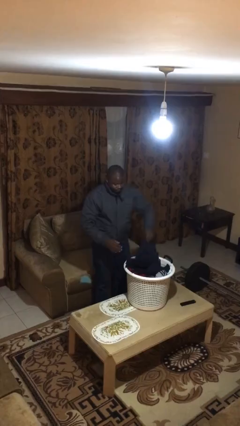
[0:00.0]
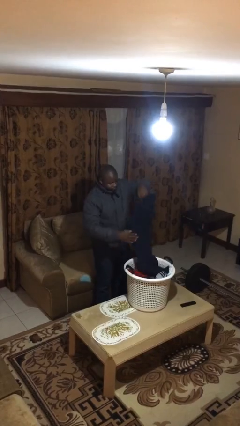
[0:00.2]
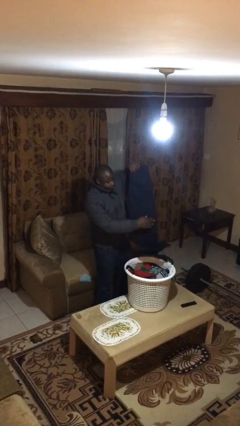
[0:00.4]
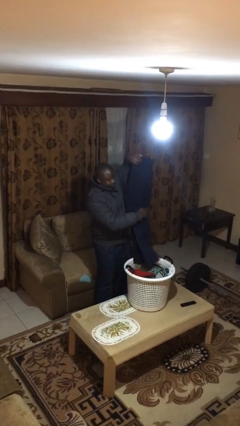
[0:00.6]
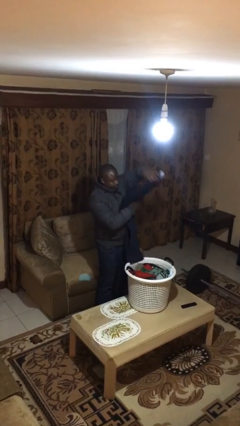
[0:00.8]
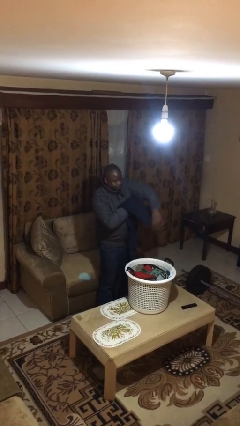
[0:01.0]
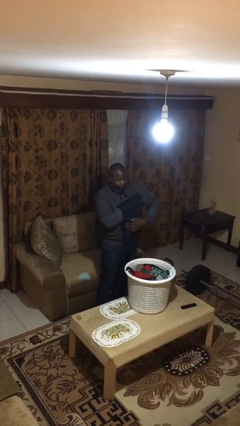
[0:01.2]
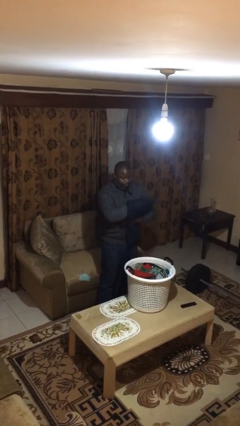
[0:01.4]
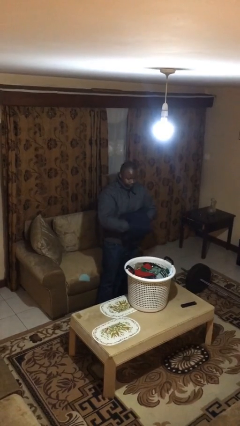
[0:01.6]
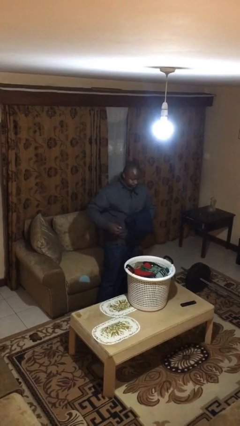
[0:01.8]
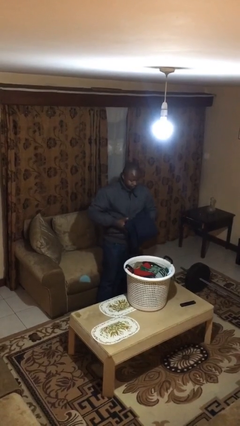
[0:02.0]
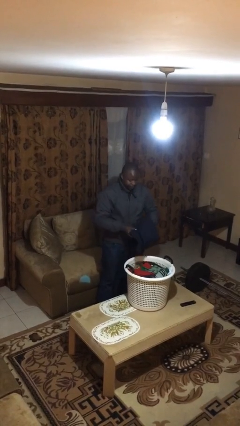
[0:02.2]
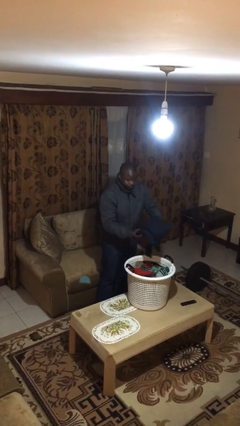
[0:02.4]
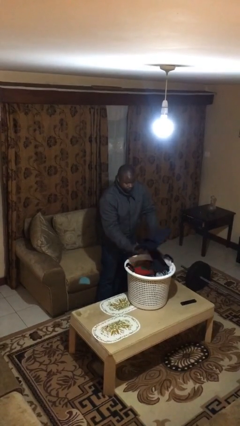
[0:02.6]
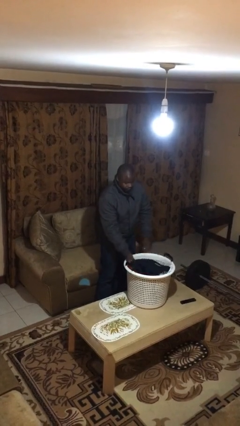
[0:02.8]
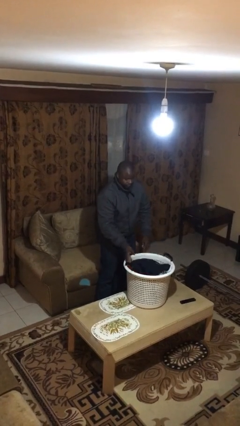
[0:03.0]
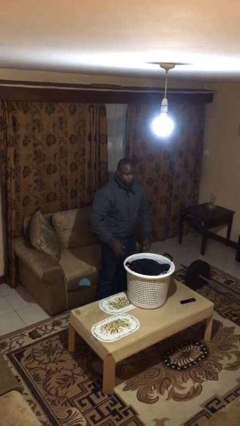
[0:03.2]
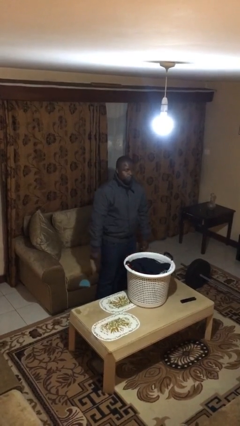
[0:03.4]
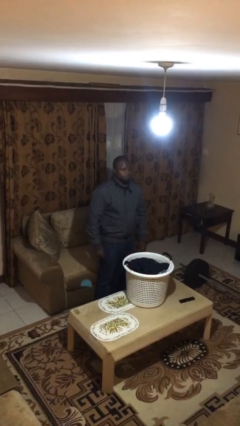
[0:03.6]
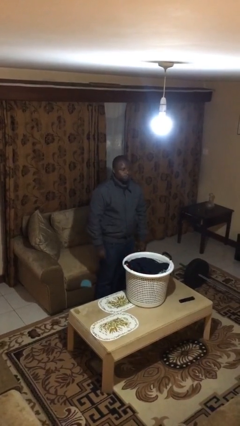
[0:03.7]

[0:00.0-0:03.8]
person folds pants

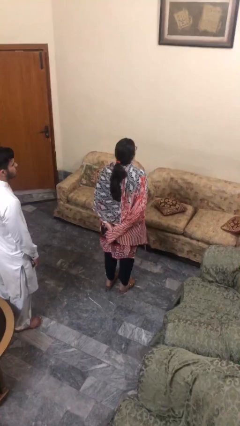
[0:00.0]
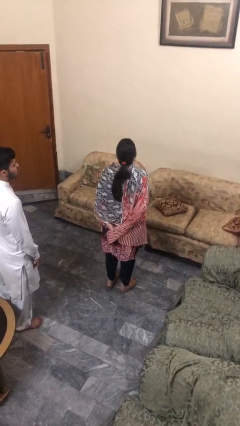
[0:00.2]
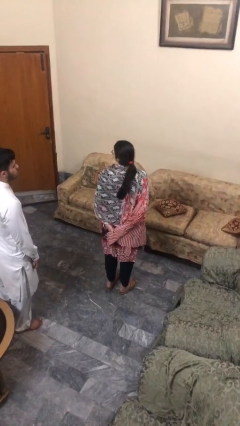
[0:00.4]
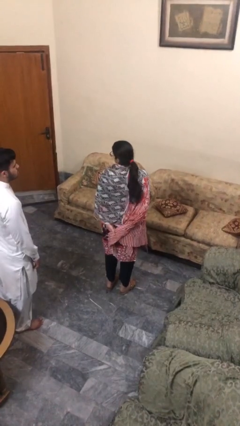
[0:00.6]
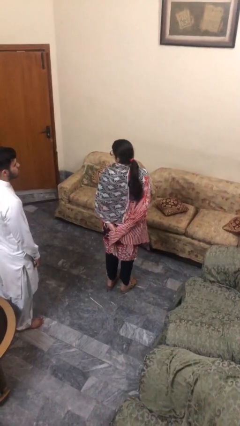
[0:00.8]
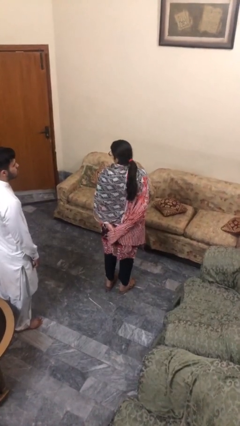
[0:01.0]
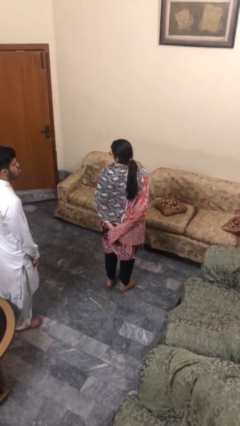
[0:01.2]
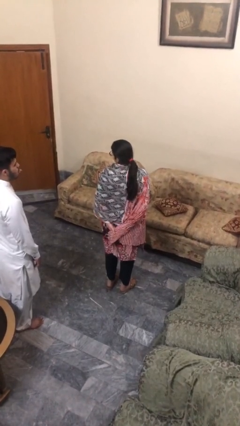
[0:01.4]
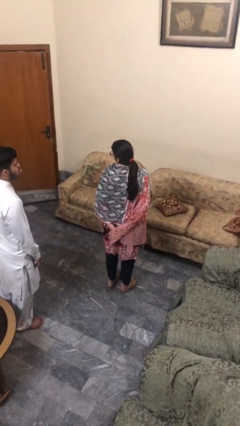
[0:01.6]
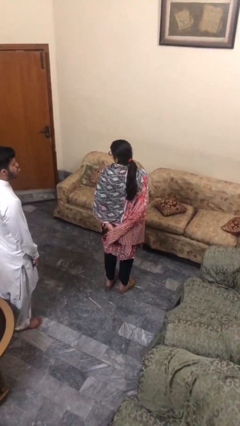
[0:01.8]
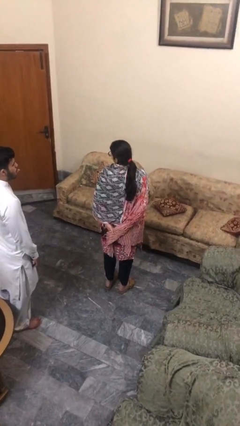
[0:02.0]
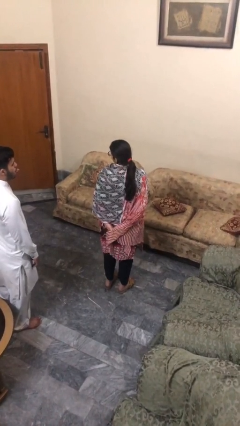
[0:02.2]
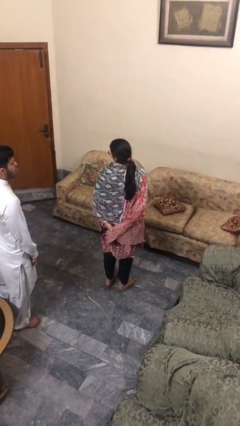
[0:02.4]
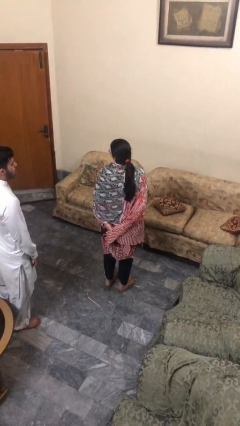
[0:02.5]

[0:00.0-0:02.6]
person looks over shoulder

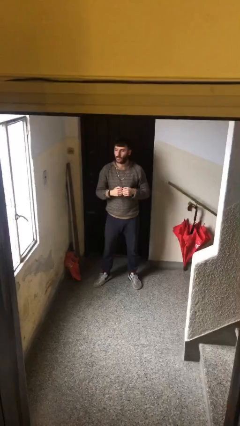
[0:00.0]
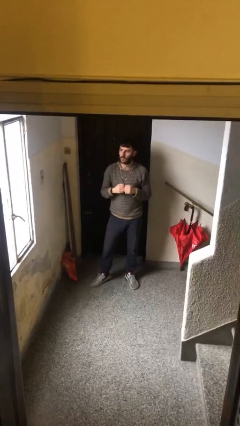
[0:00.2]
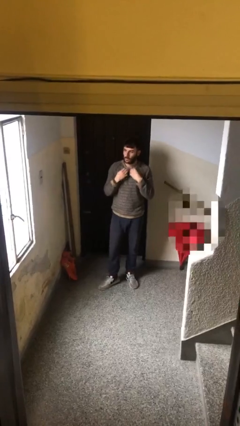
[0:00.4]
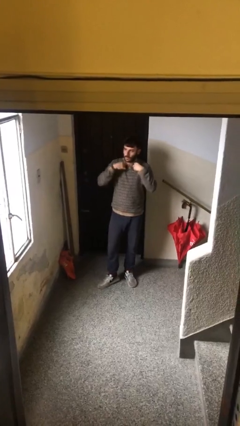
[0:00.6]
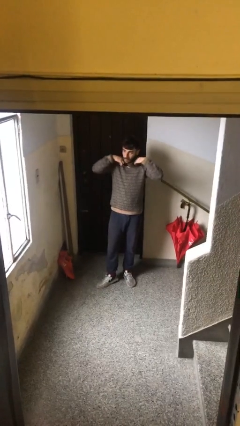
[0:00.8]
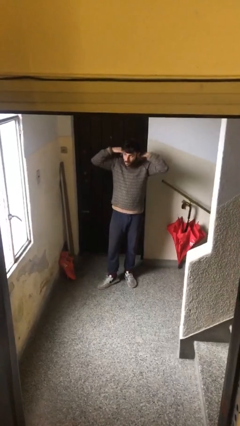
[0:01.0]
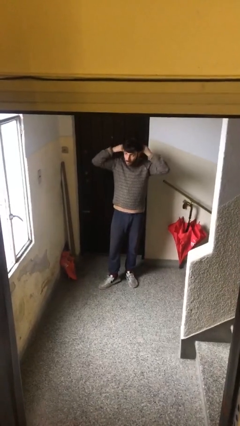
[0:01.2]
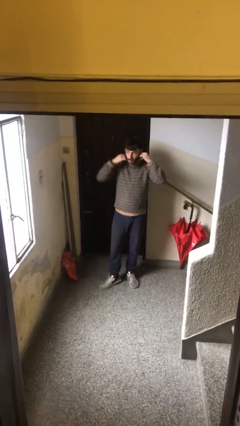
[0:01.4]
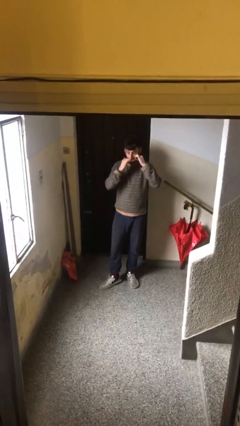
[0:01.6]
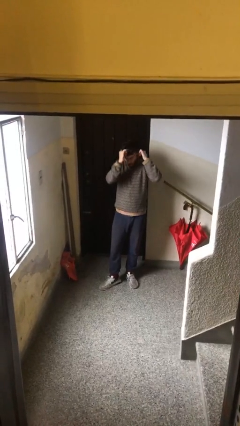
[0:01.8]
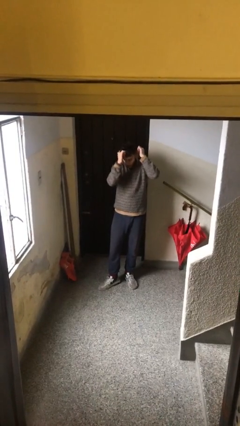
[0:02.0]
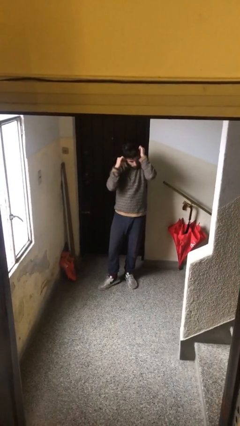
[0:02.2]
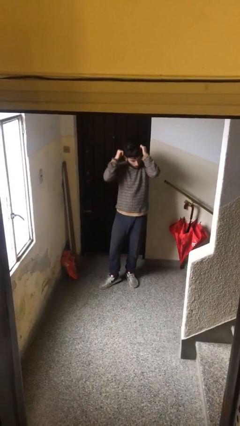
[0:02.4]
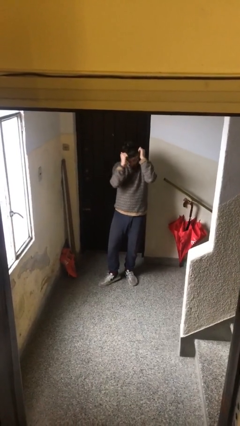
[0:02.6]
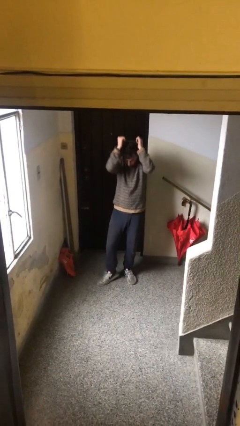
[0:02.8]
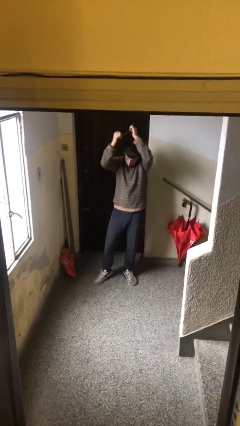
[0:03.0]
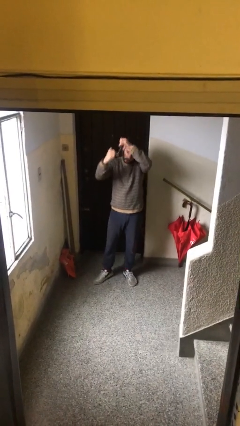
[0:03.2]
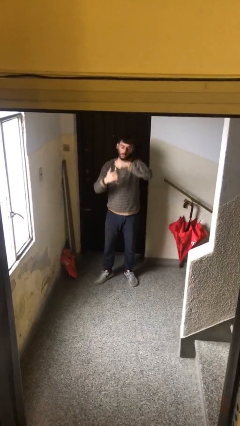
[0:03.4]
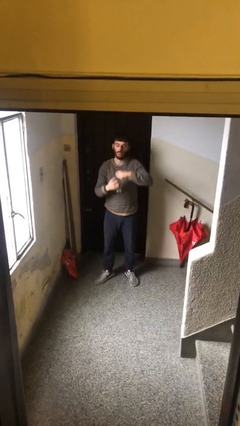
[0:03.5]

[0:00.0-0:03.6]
person takes off necklace

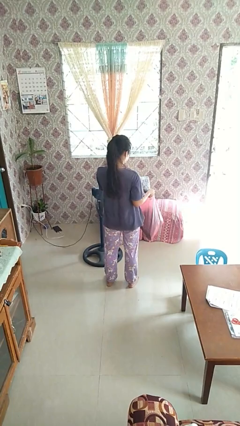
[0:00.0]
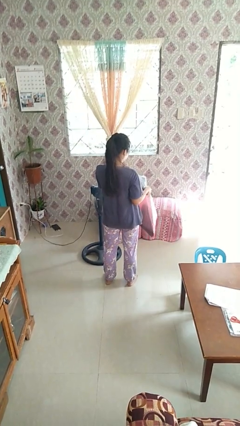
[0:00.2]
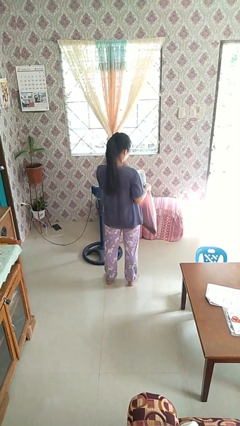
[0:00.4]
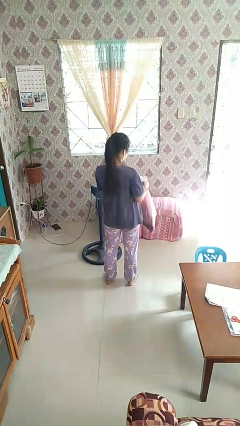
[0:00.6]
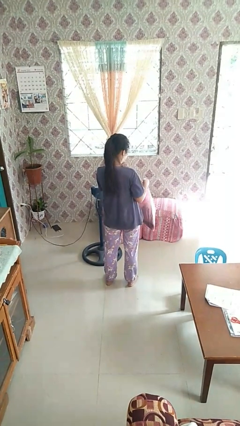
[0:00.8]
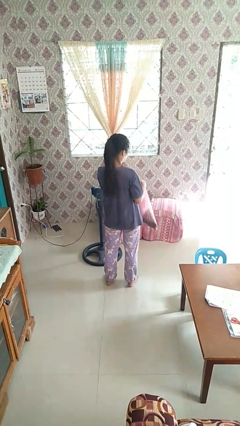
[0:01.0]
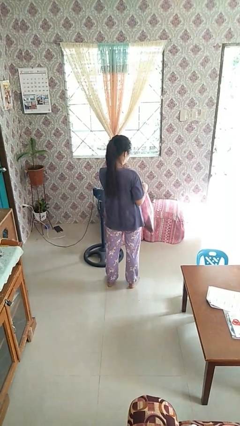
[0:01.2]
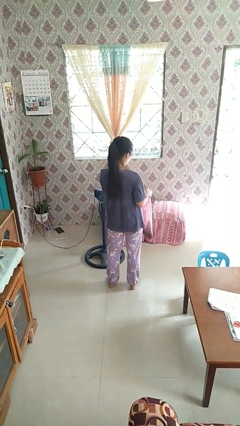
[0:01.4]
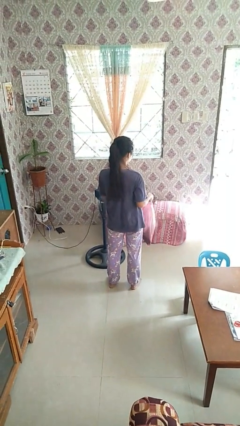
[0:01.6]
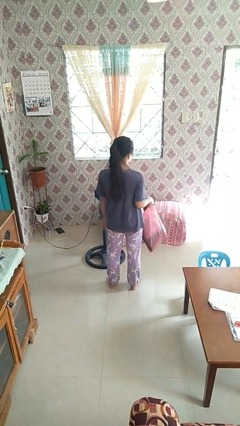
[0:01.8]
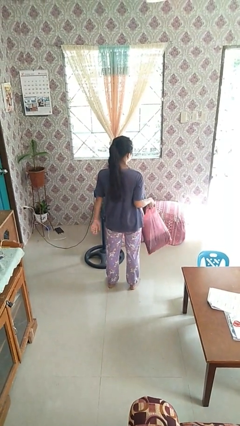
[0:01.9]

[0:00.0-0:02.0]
person puts object into bag

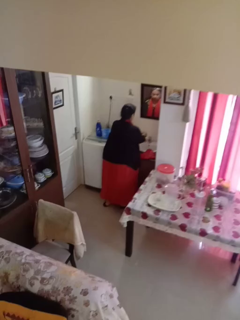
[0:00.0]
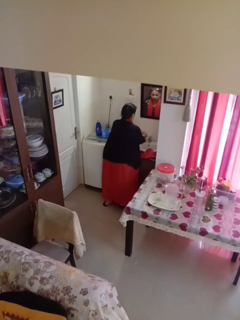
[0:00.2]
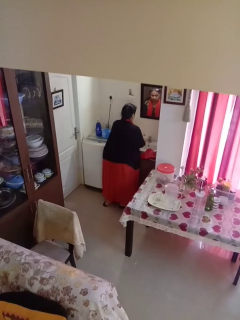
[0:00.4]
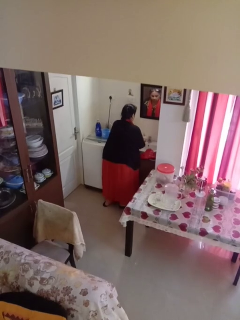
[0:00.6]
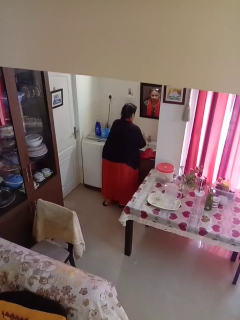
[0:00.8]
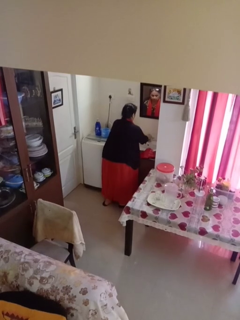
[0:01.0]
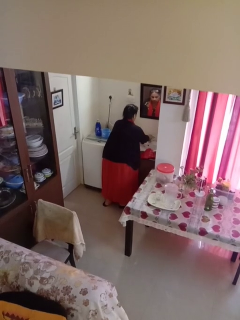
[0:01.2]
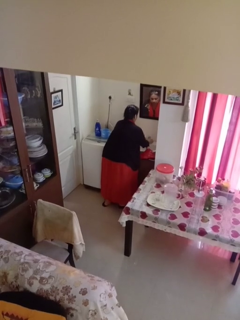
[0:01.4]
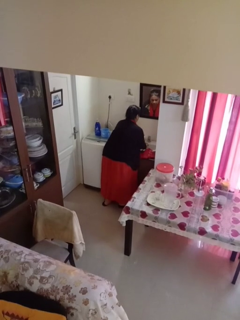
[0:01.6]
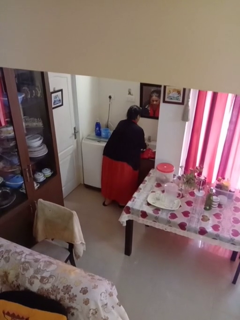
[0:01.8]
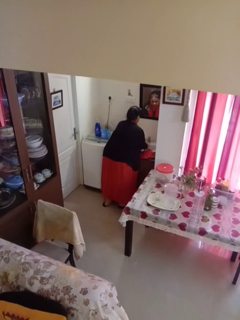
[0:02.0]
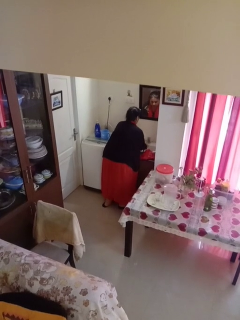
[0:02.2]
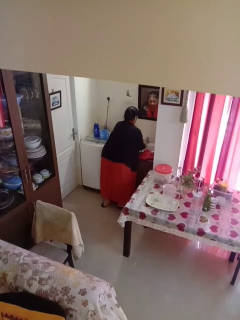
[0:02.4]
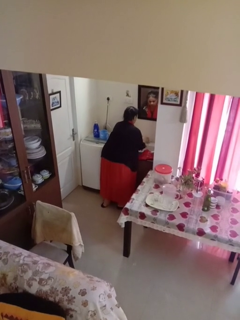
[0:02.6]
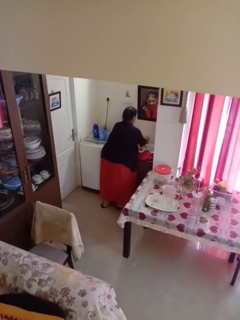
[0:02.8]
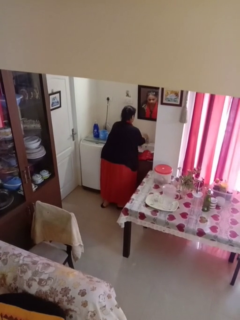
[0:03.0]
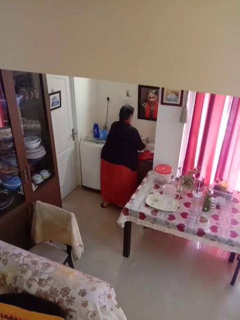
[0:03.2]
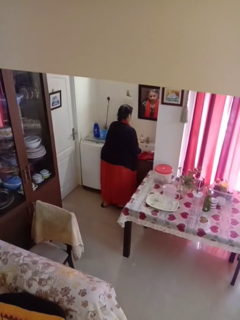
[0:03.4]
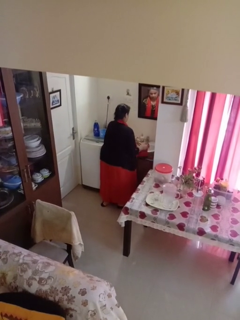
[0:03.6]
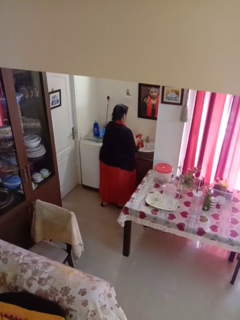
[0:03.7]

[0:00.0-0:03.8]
person washes hands

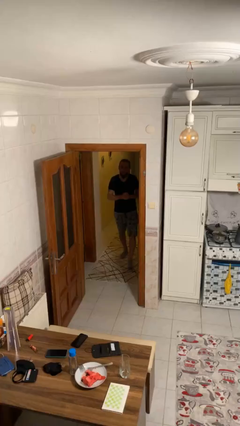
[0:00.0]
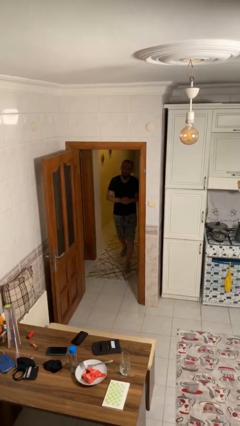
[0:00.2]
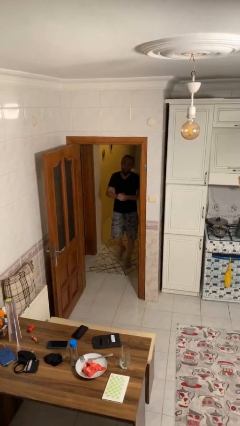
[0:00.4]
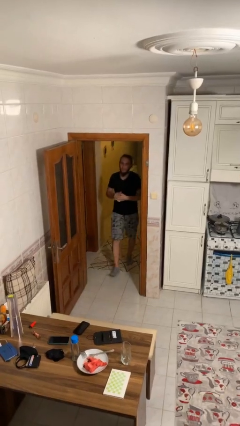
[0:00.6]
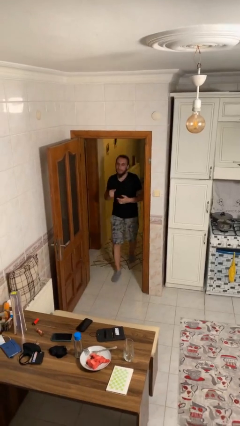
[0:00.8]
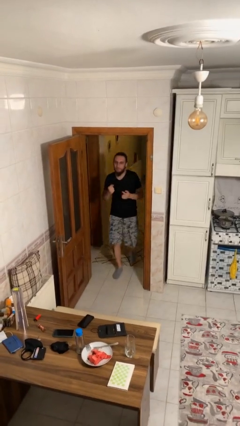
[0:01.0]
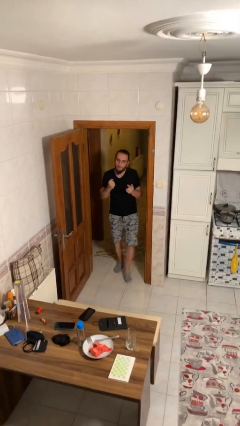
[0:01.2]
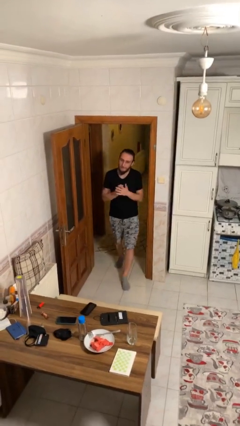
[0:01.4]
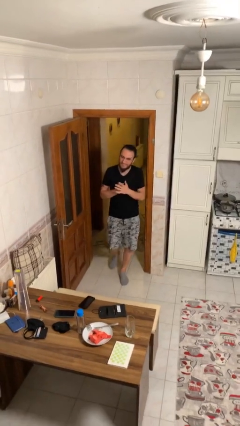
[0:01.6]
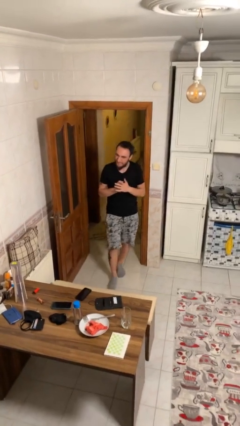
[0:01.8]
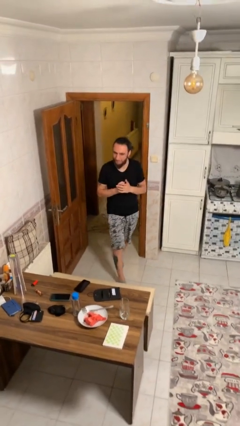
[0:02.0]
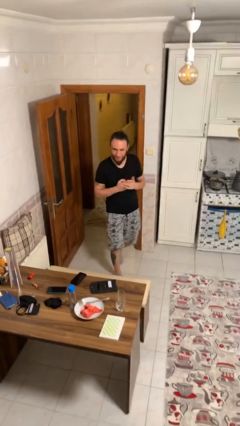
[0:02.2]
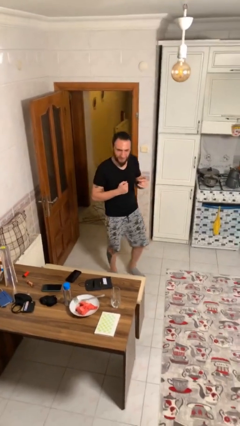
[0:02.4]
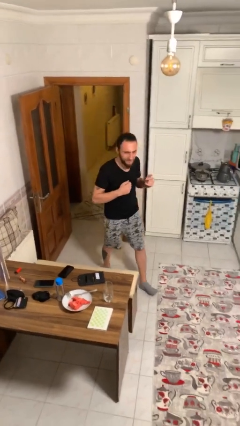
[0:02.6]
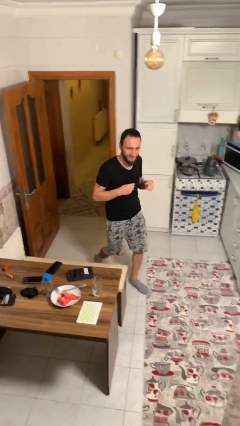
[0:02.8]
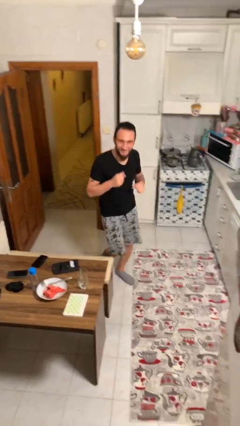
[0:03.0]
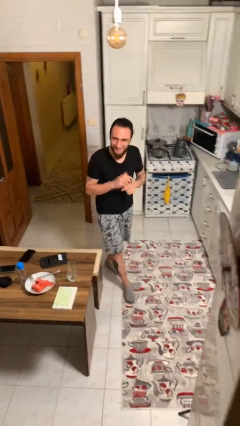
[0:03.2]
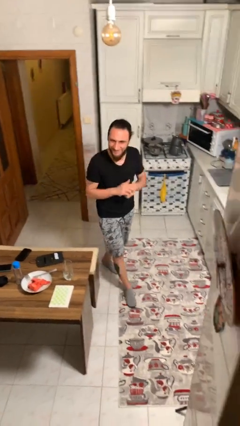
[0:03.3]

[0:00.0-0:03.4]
person enters scene through structure
